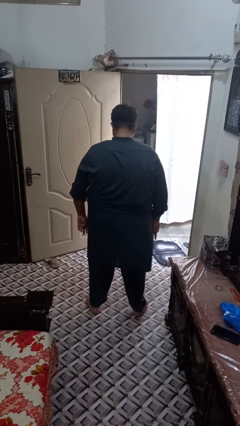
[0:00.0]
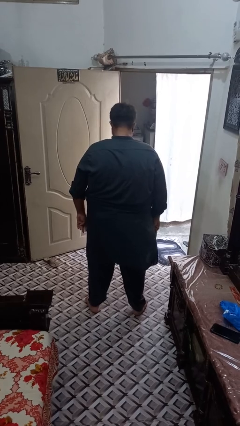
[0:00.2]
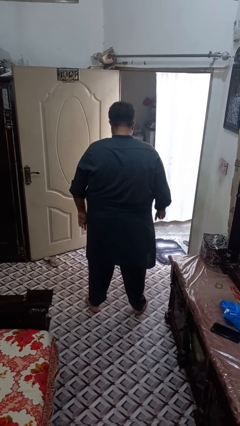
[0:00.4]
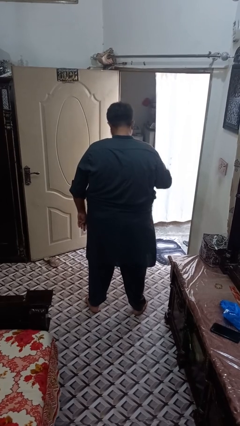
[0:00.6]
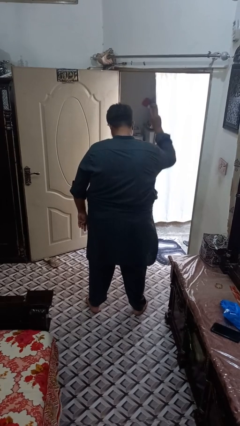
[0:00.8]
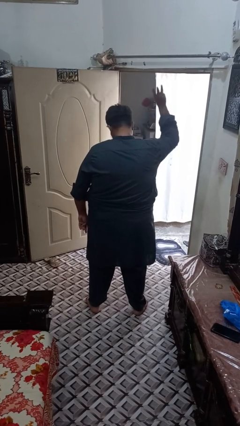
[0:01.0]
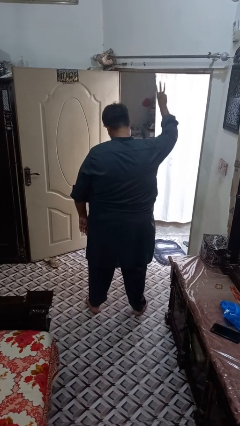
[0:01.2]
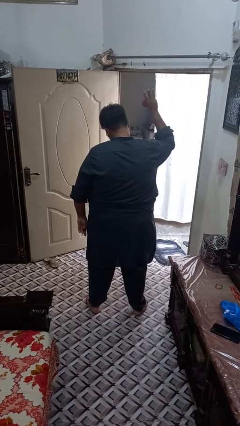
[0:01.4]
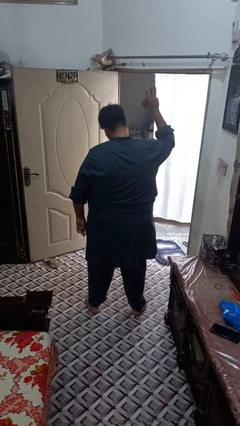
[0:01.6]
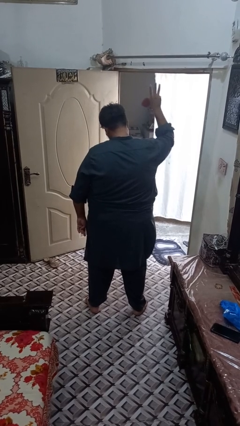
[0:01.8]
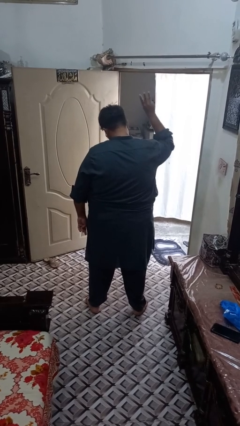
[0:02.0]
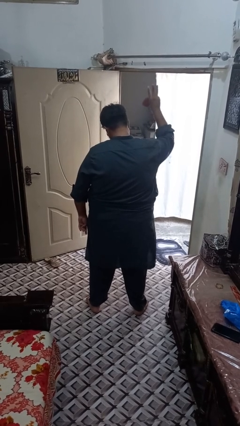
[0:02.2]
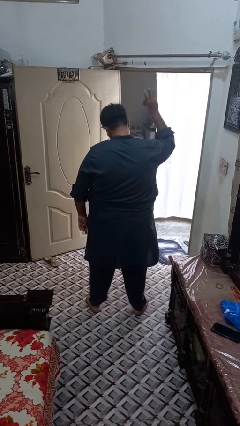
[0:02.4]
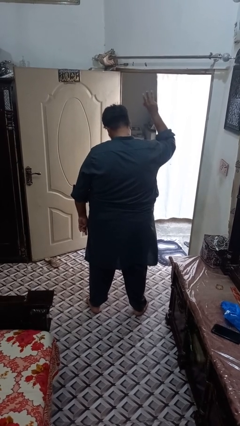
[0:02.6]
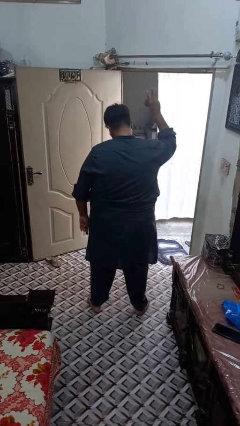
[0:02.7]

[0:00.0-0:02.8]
person gestures number three

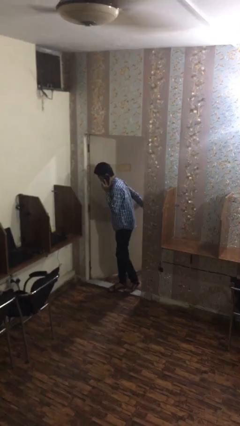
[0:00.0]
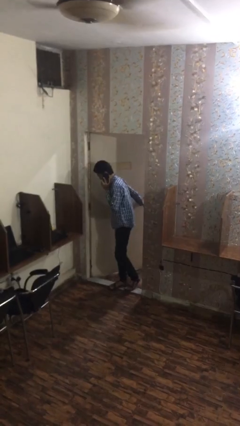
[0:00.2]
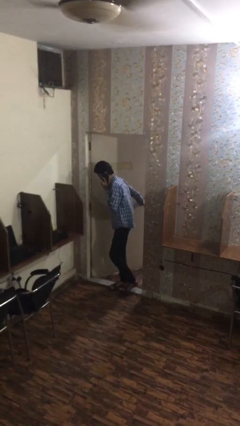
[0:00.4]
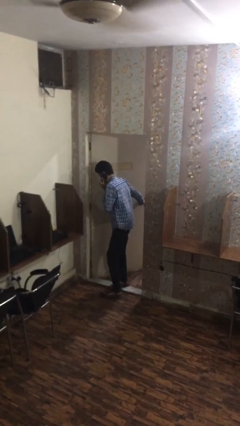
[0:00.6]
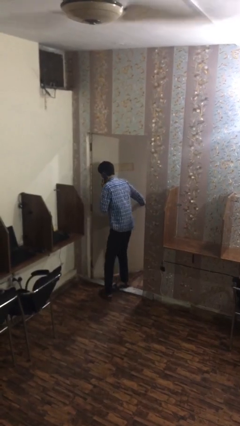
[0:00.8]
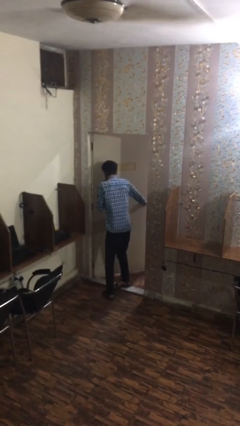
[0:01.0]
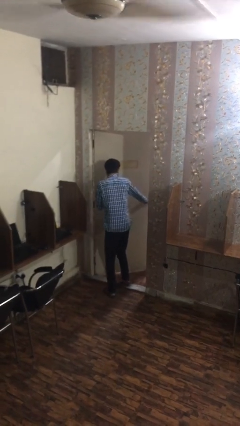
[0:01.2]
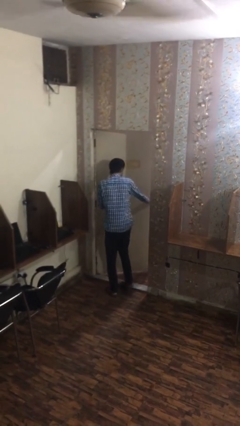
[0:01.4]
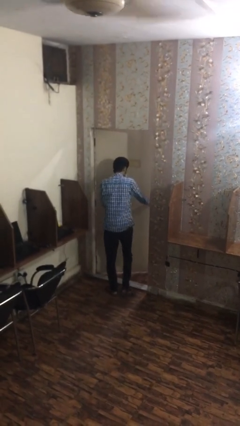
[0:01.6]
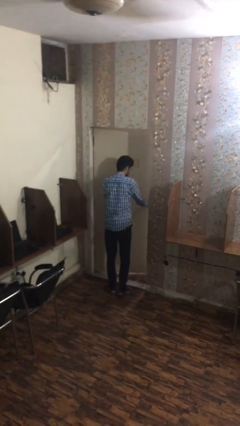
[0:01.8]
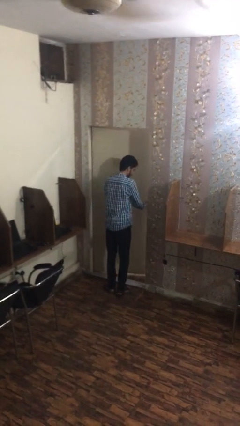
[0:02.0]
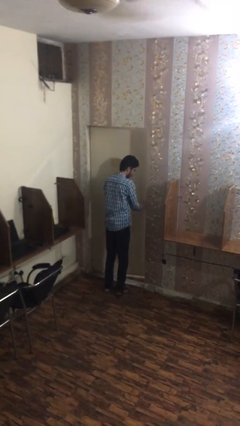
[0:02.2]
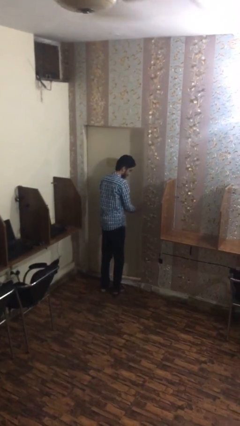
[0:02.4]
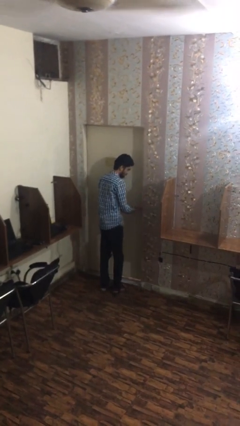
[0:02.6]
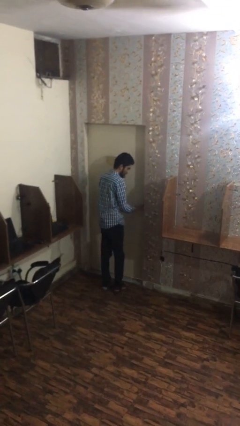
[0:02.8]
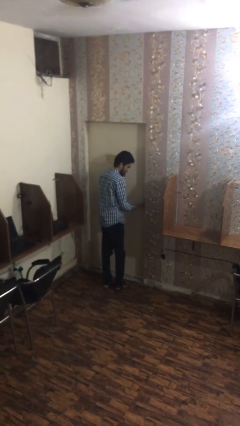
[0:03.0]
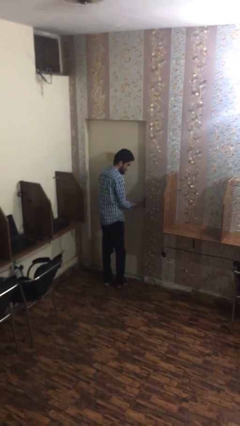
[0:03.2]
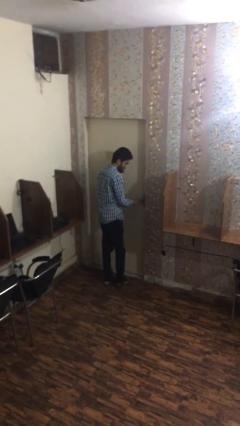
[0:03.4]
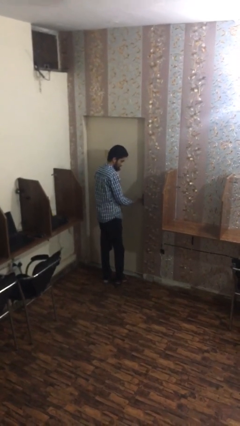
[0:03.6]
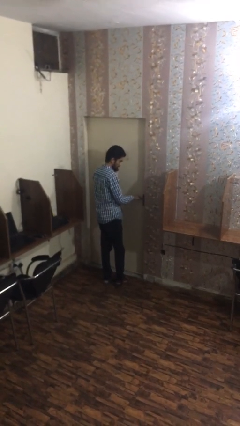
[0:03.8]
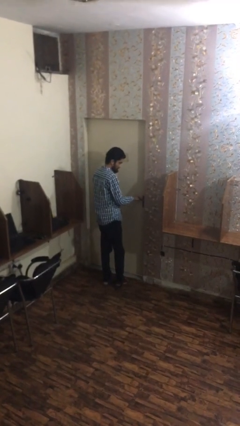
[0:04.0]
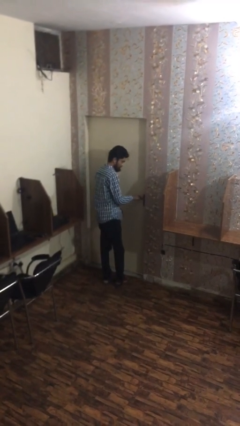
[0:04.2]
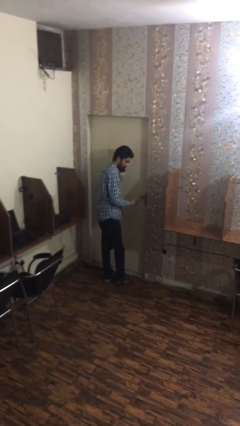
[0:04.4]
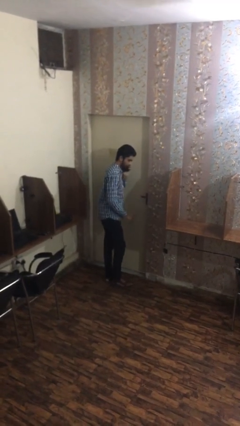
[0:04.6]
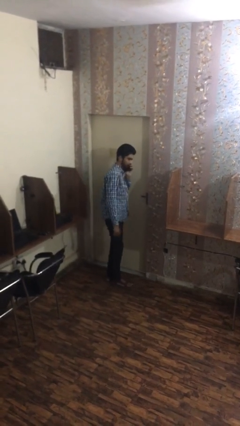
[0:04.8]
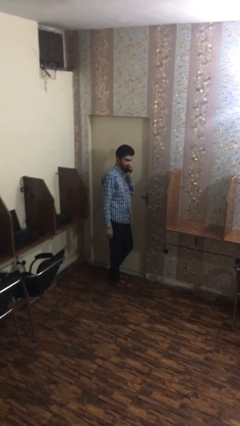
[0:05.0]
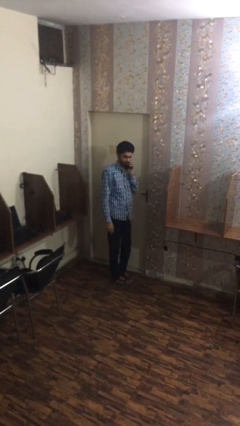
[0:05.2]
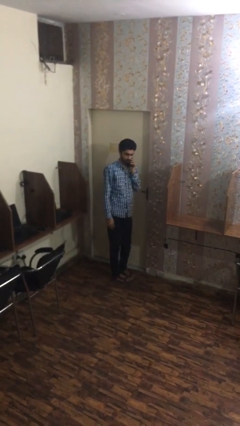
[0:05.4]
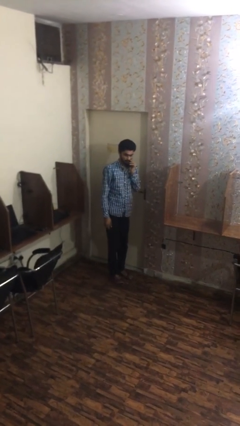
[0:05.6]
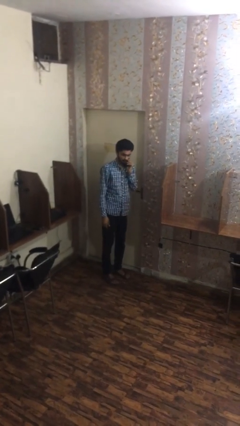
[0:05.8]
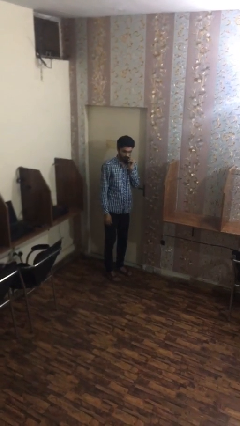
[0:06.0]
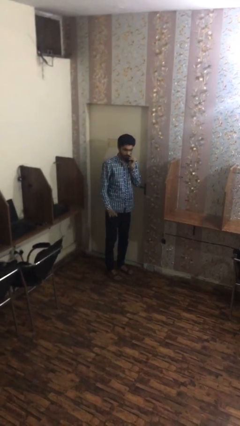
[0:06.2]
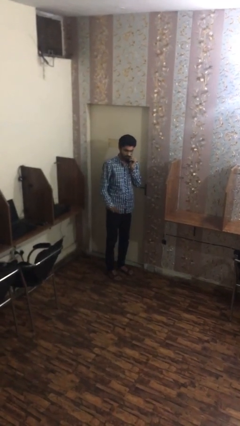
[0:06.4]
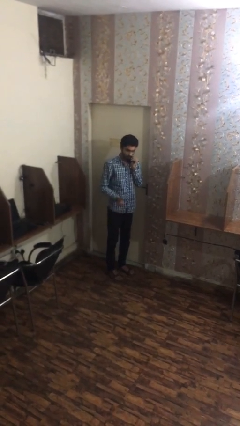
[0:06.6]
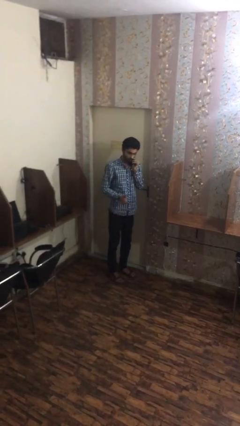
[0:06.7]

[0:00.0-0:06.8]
person closes facility door

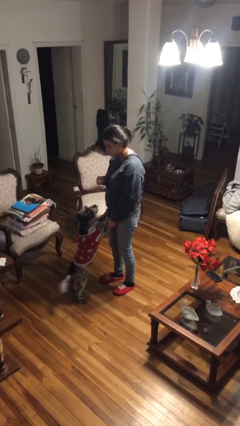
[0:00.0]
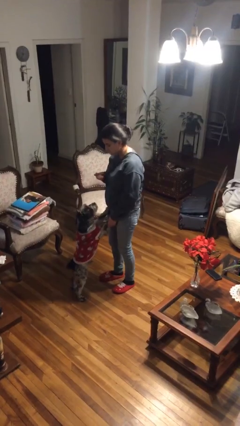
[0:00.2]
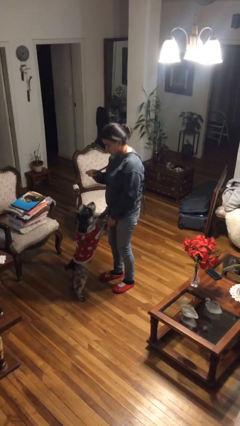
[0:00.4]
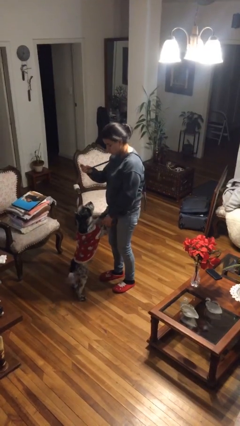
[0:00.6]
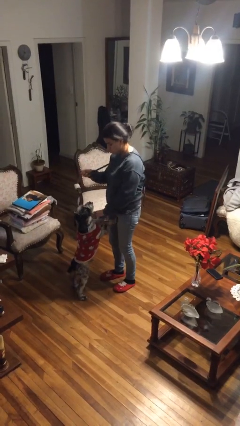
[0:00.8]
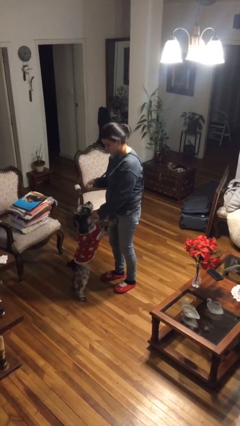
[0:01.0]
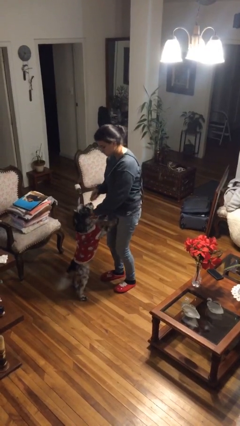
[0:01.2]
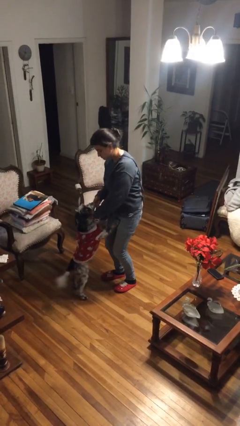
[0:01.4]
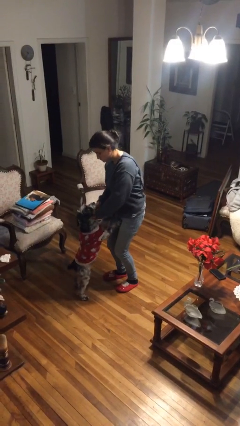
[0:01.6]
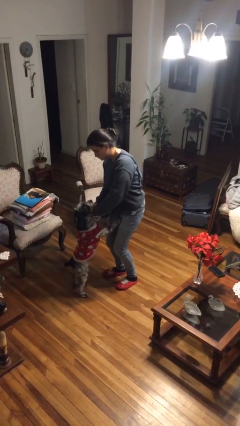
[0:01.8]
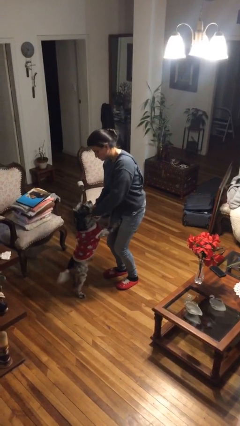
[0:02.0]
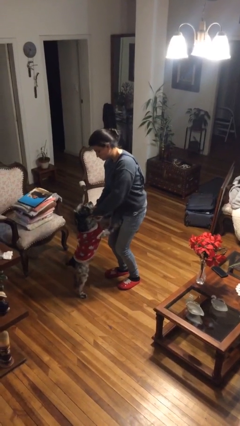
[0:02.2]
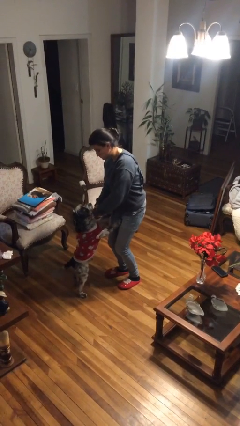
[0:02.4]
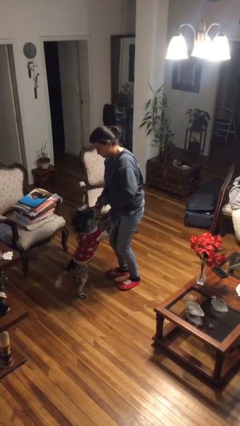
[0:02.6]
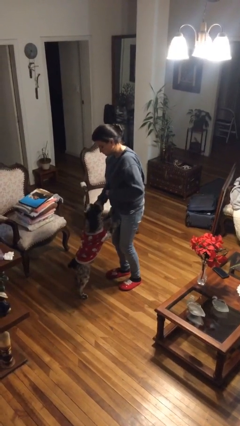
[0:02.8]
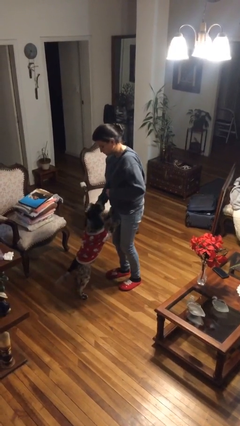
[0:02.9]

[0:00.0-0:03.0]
person attaches leash to dog

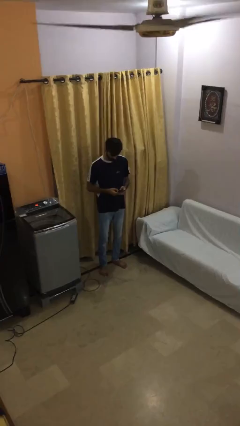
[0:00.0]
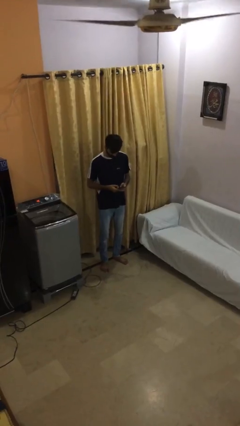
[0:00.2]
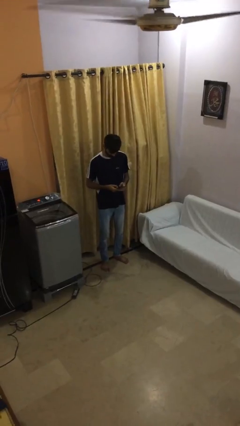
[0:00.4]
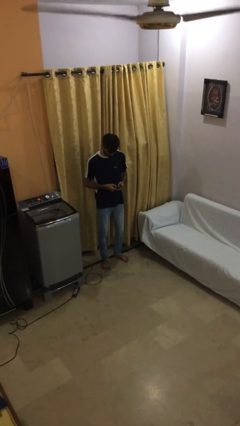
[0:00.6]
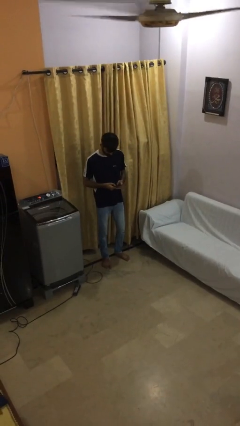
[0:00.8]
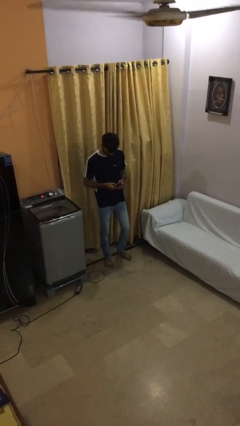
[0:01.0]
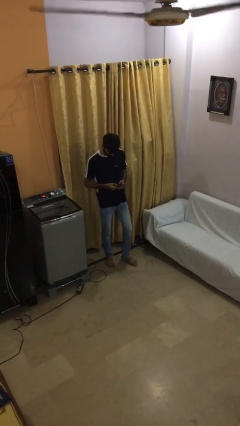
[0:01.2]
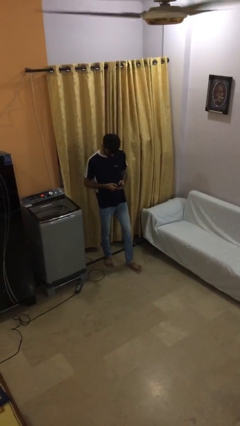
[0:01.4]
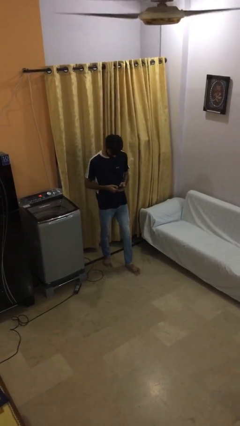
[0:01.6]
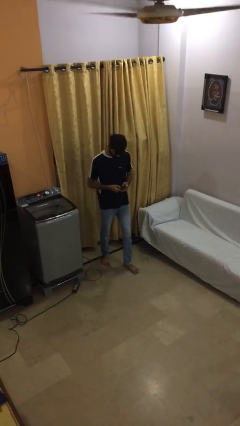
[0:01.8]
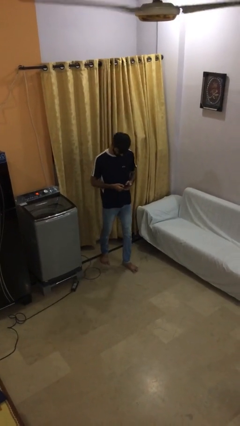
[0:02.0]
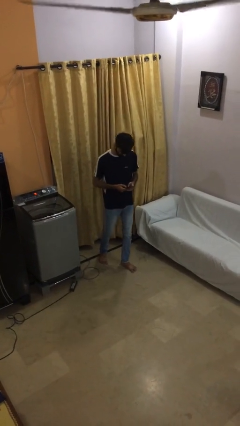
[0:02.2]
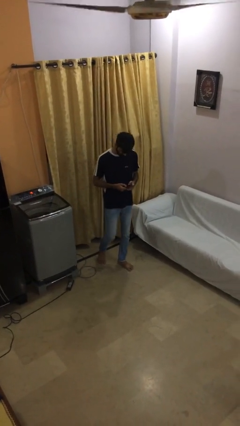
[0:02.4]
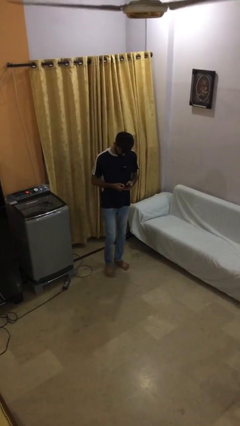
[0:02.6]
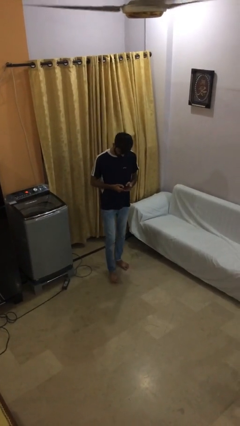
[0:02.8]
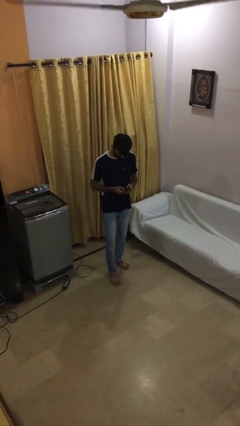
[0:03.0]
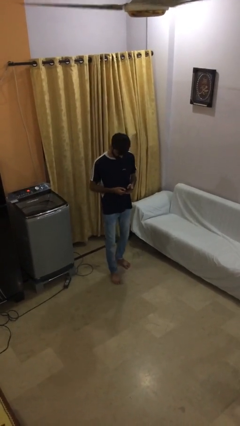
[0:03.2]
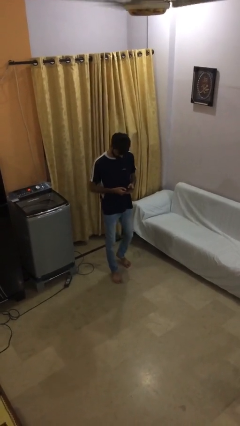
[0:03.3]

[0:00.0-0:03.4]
person texts on phone

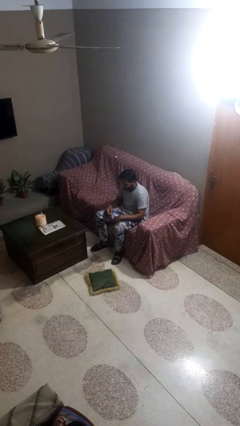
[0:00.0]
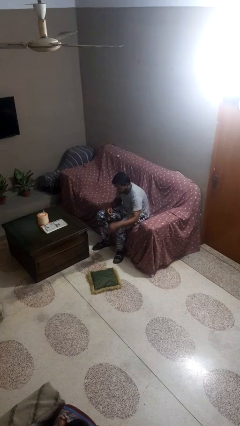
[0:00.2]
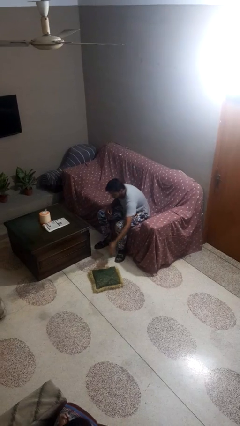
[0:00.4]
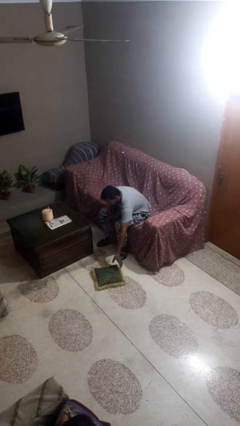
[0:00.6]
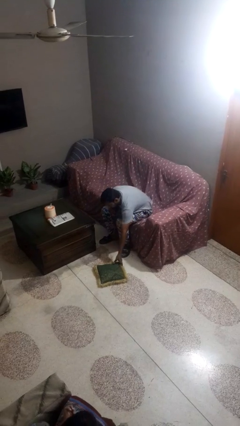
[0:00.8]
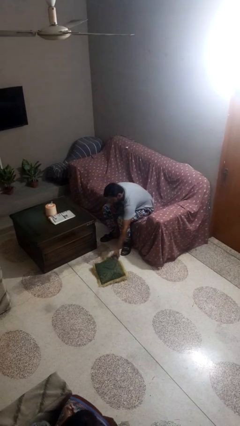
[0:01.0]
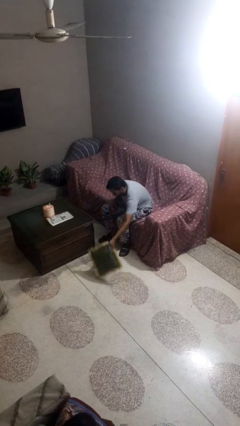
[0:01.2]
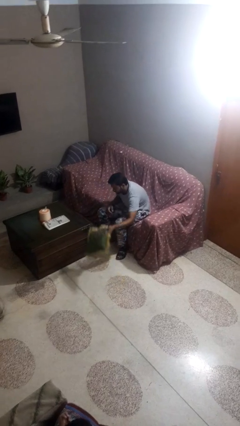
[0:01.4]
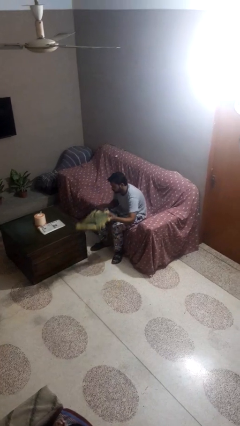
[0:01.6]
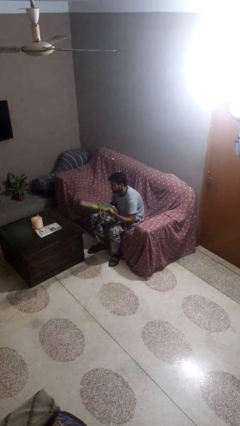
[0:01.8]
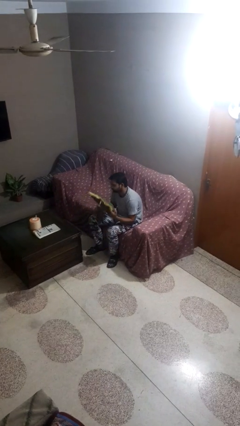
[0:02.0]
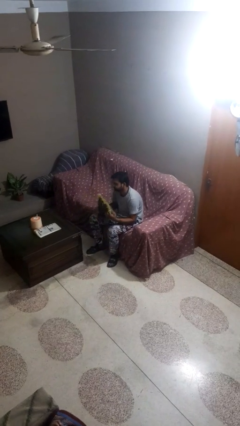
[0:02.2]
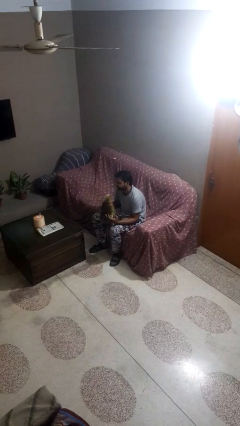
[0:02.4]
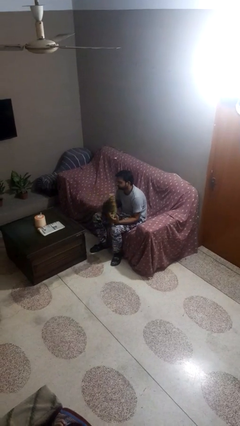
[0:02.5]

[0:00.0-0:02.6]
person picks up object from floor
